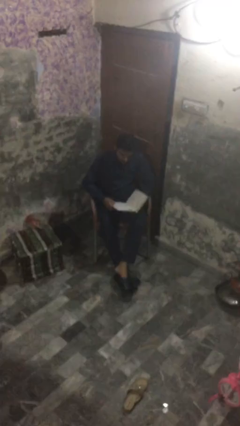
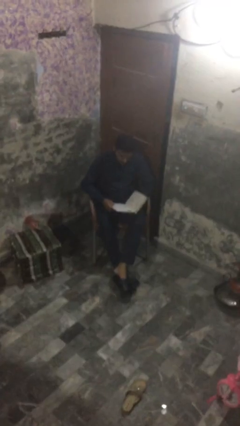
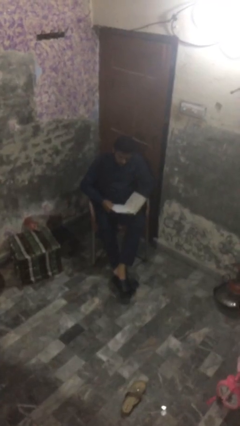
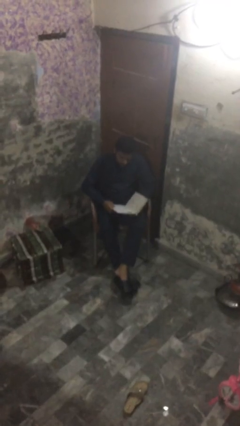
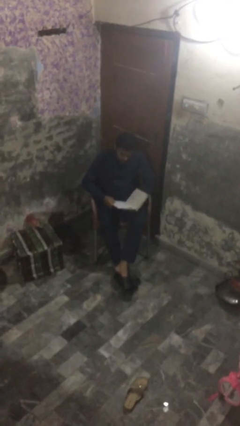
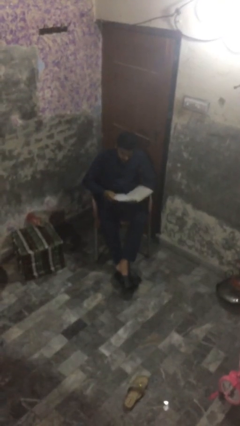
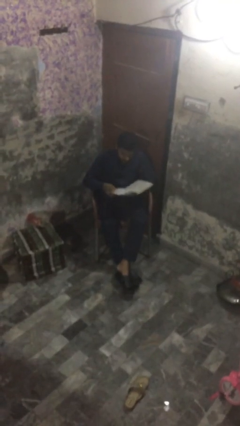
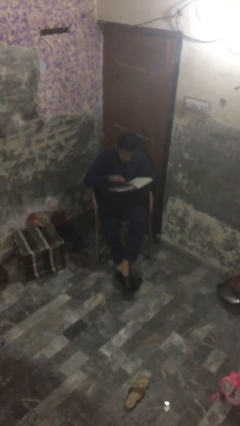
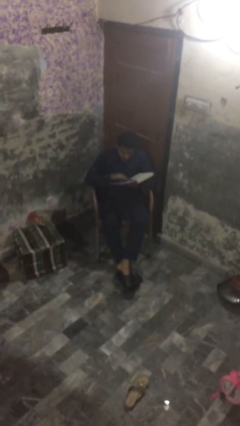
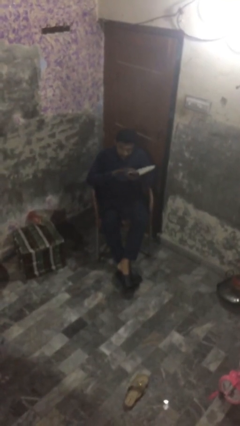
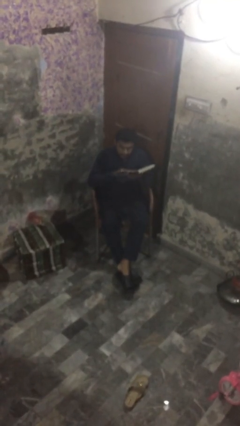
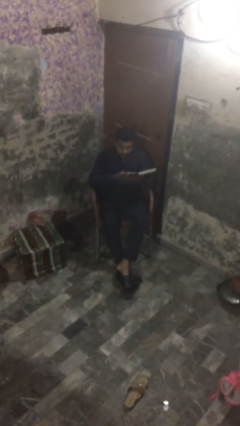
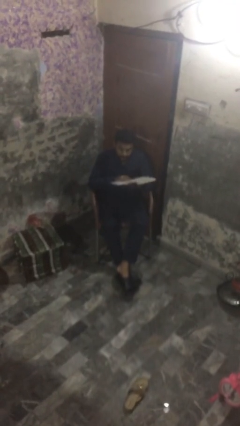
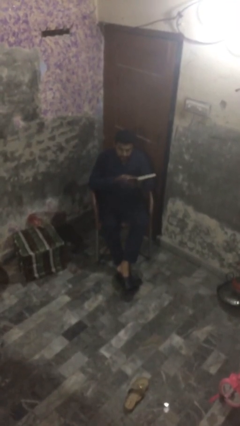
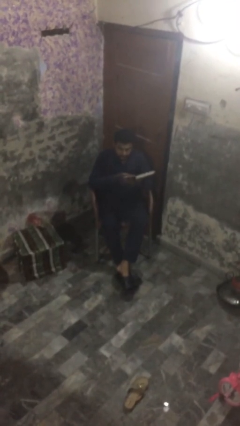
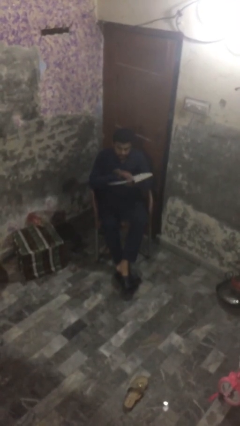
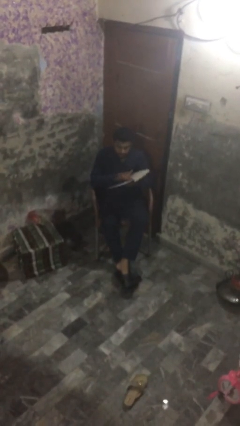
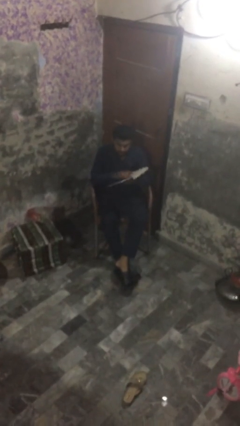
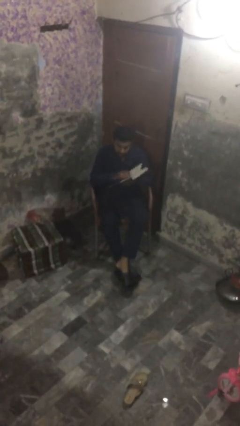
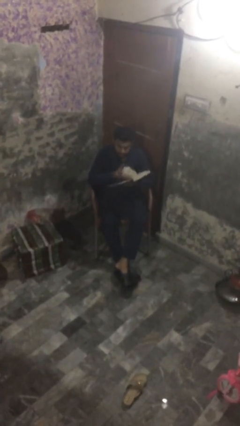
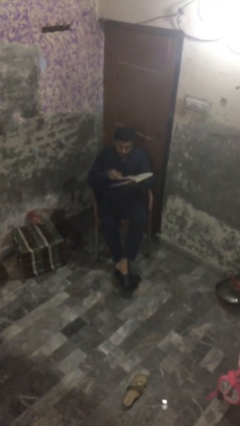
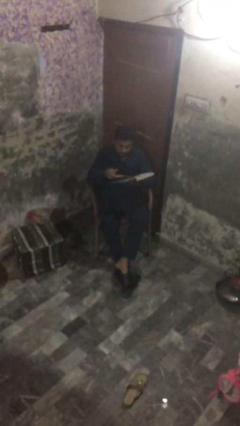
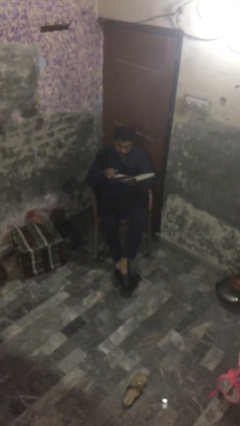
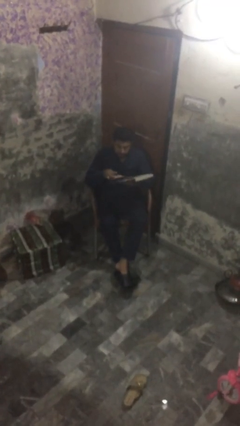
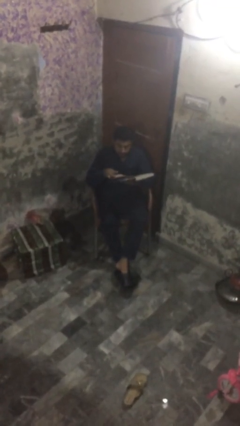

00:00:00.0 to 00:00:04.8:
person reads document

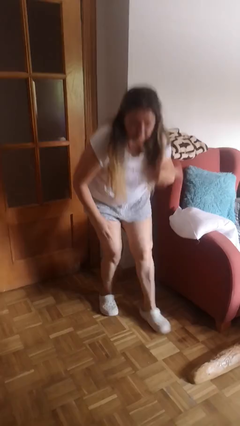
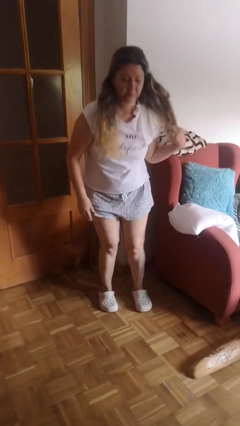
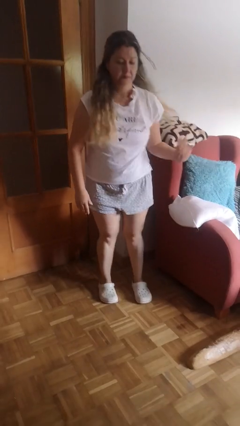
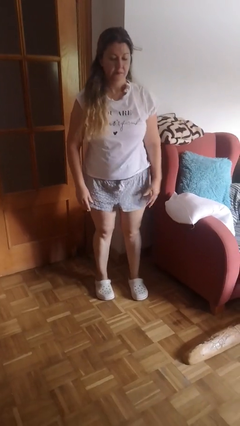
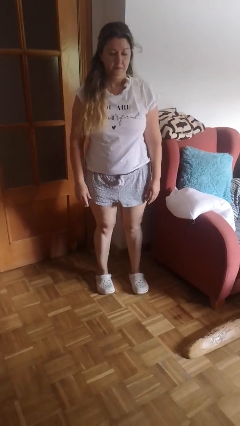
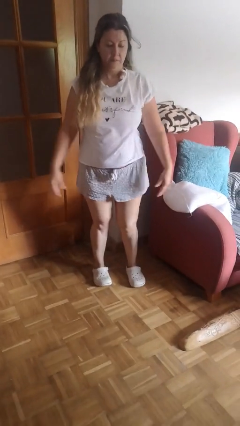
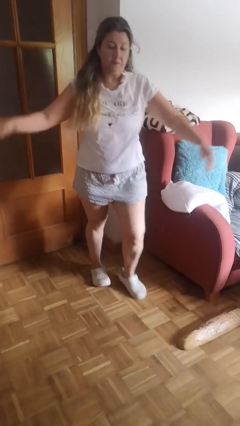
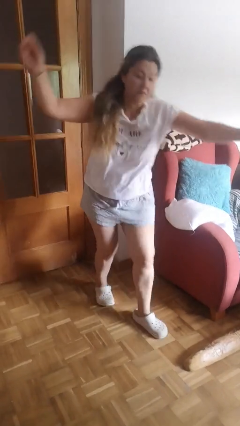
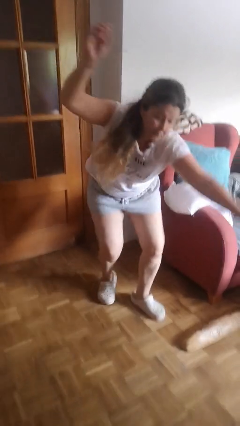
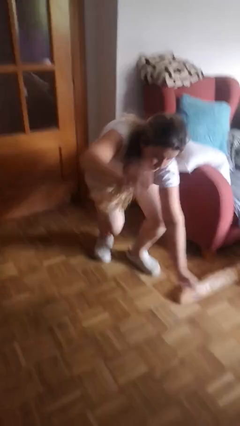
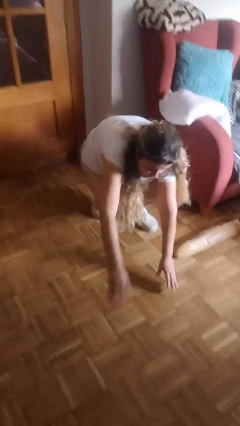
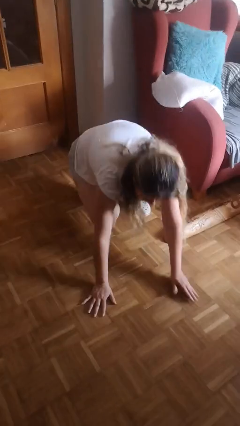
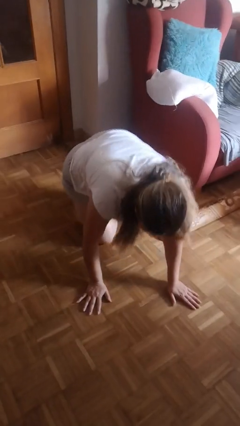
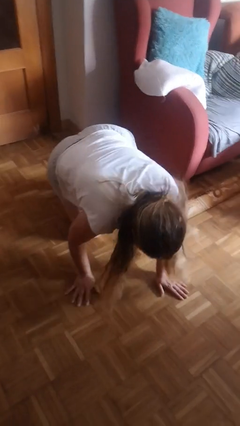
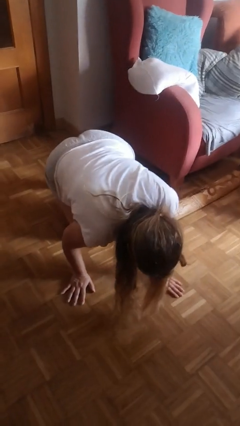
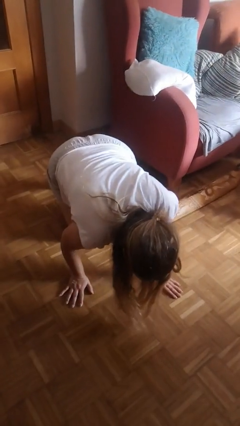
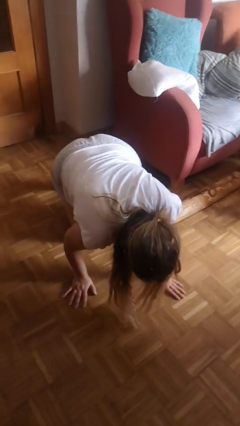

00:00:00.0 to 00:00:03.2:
person trips on object on floor

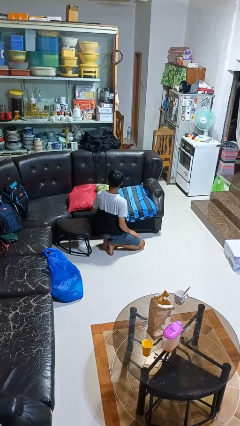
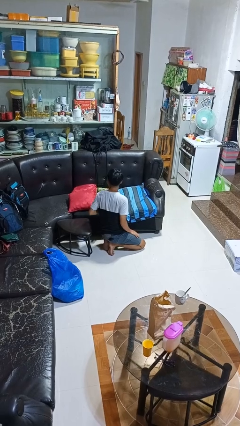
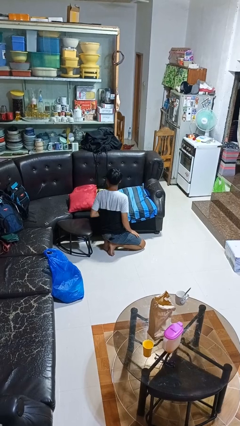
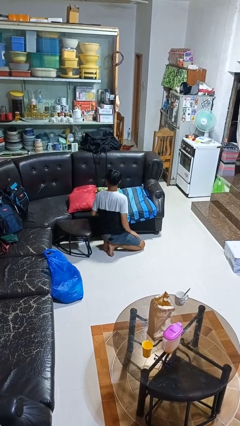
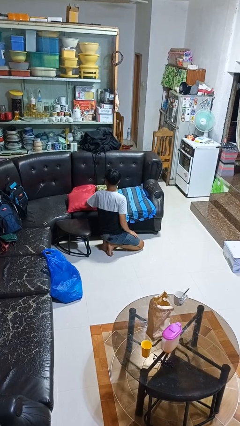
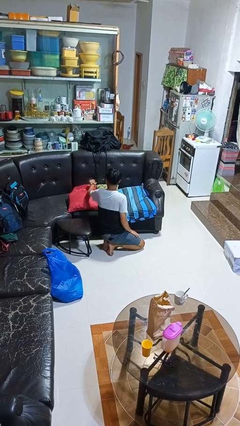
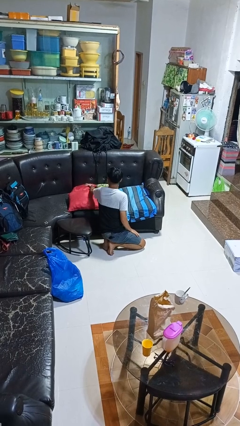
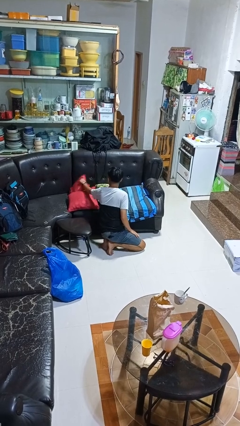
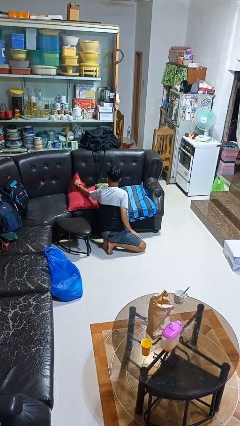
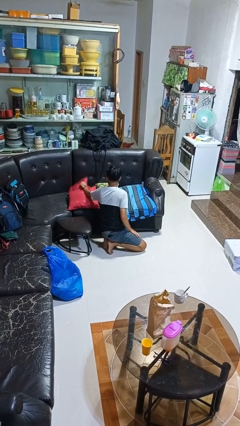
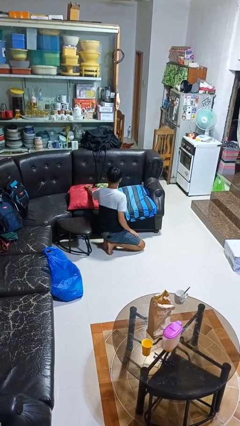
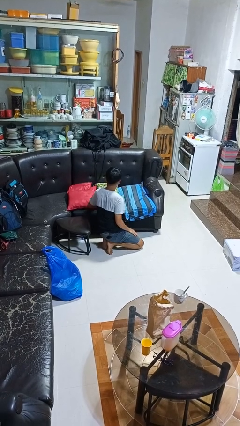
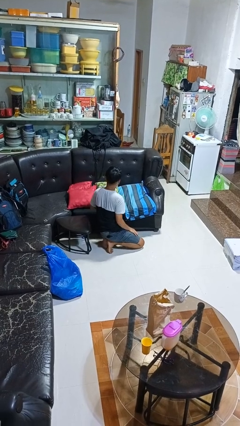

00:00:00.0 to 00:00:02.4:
person searches in couch

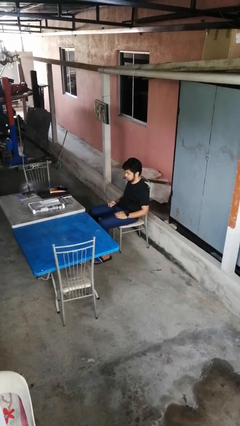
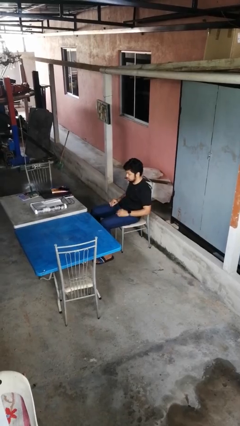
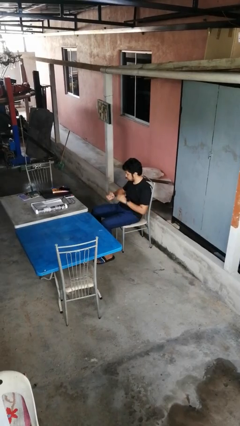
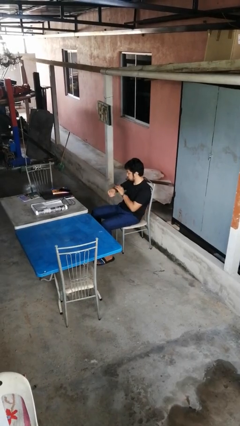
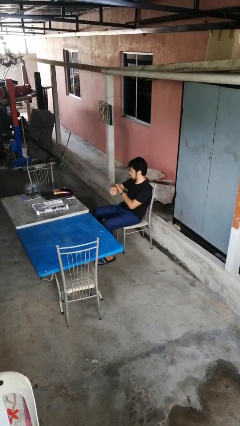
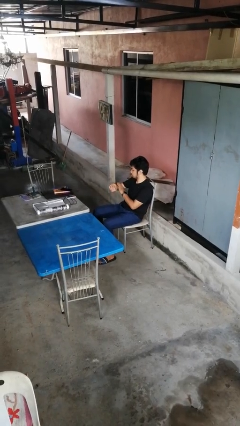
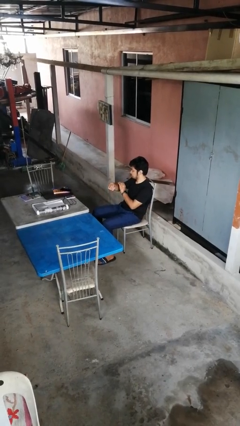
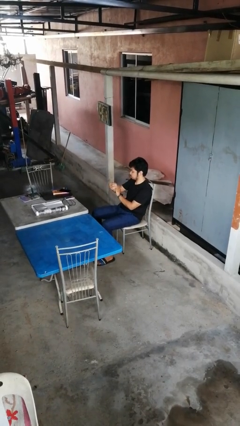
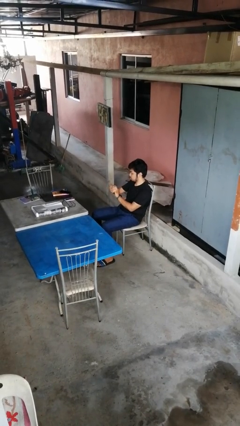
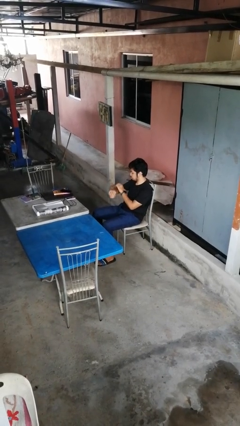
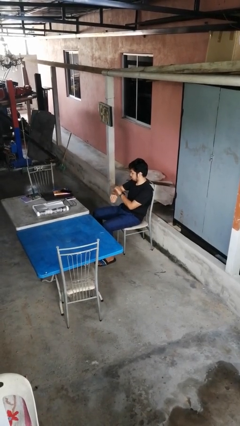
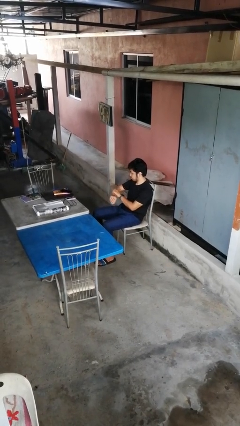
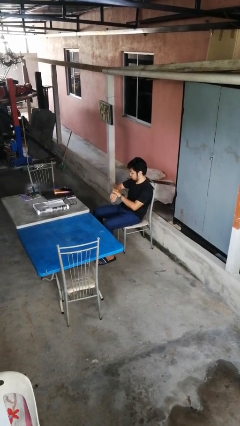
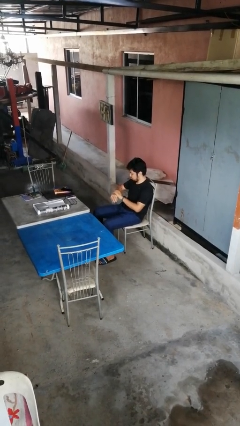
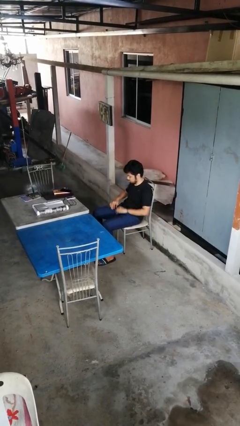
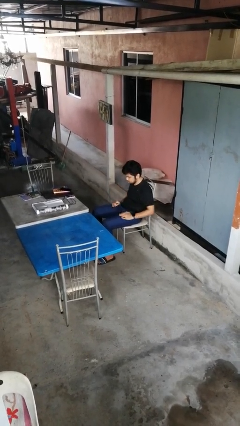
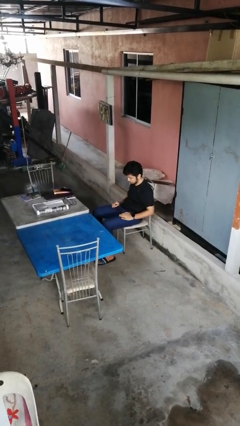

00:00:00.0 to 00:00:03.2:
person looks at hands in lap

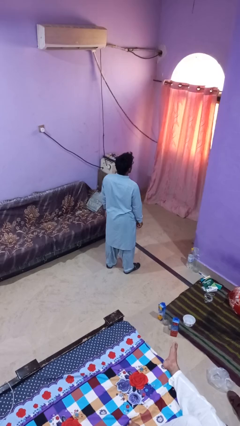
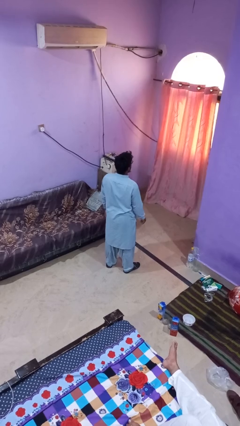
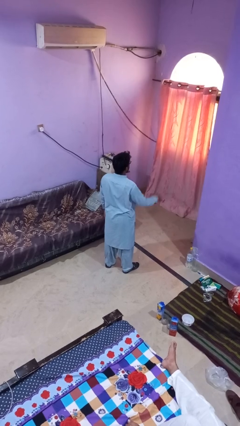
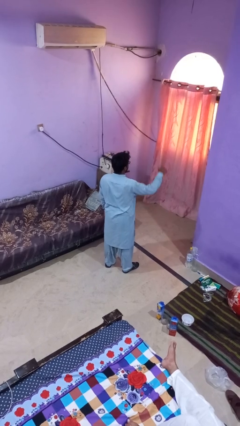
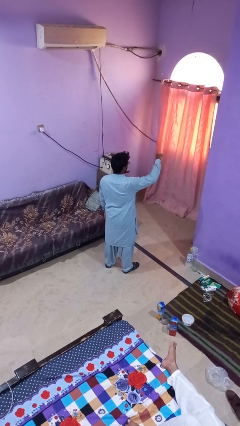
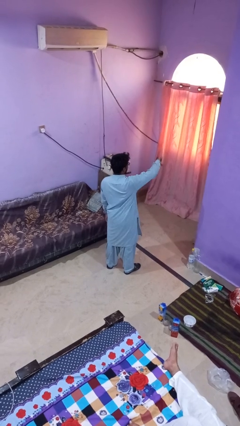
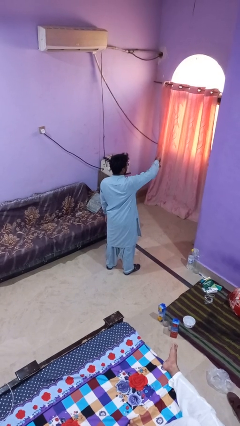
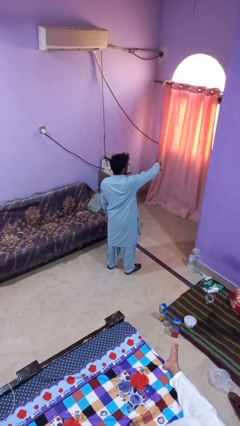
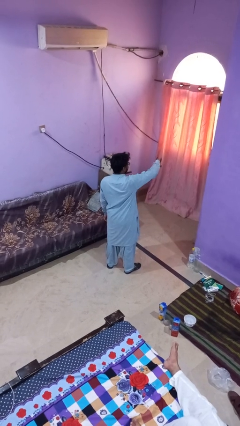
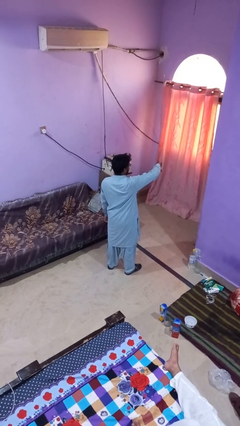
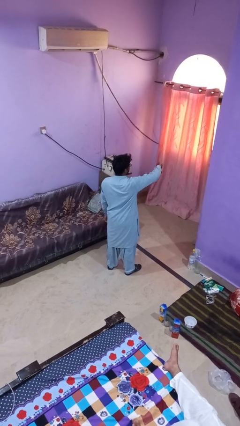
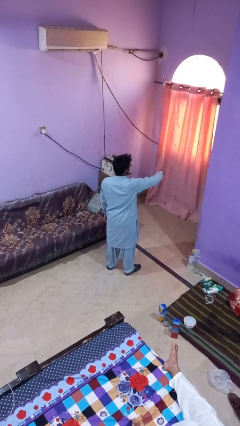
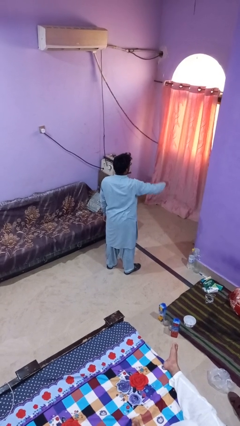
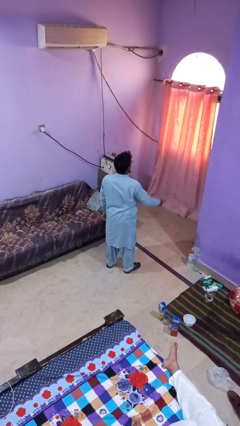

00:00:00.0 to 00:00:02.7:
person gestures thumbs down

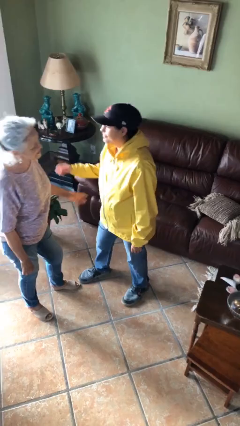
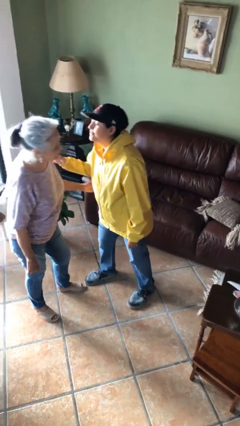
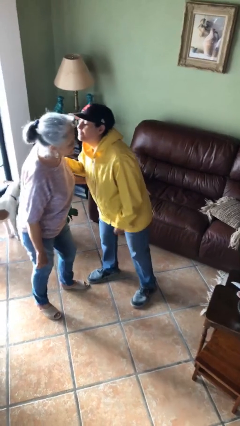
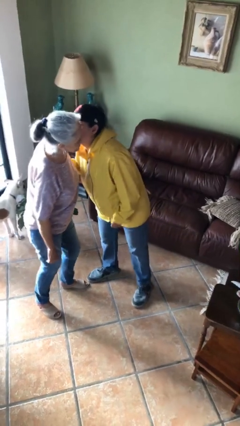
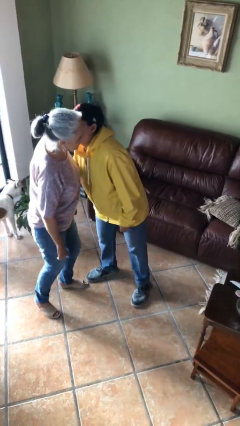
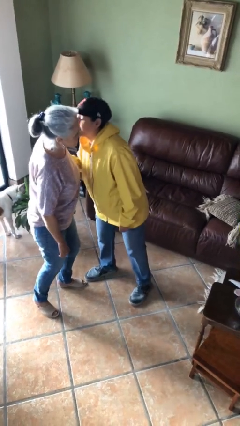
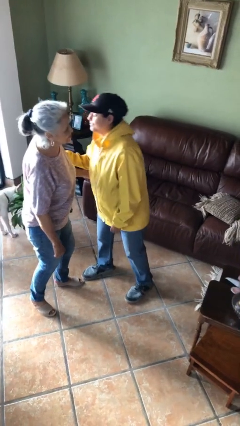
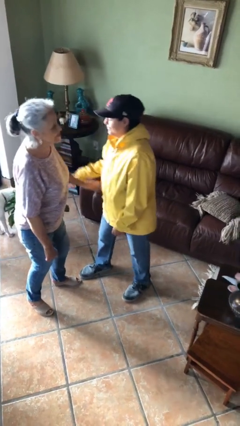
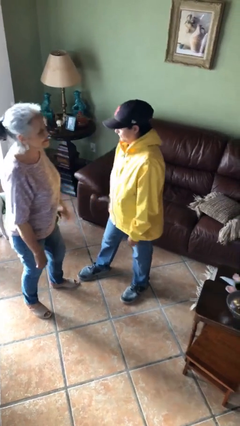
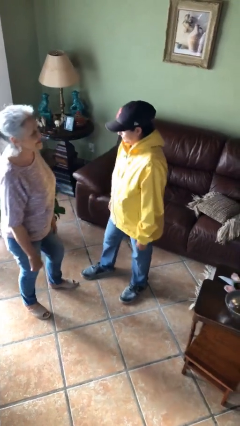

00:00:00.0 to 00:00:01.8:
person kisses cheek of person
